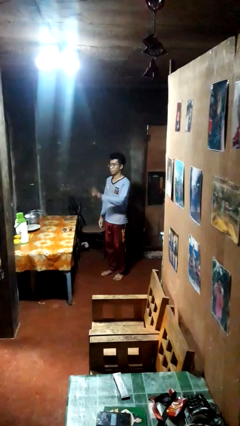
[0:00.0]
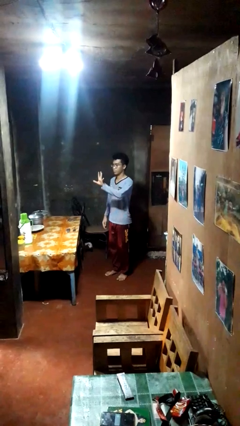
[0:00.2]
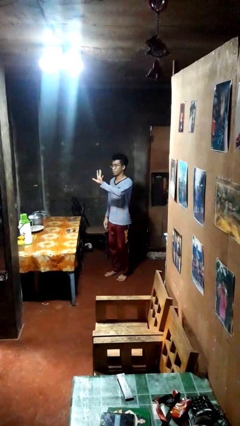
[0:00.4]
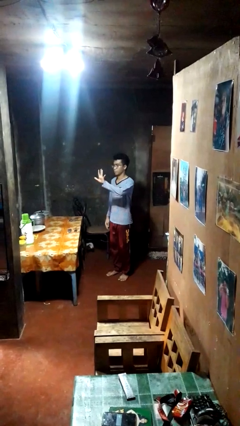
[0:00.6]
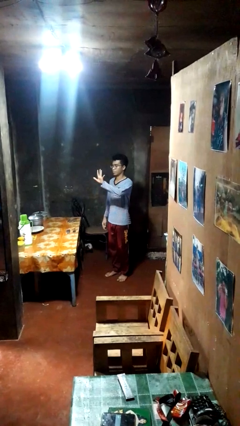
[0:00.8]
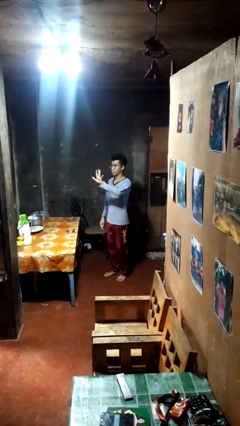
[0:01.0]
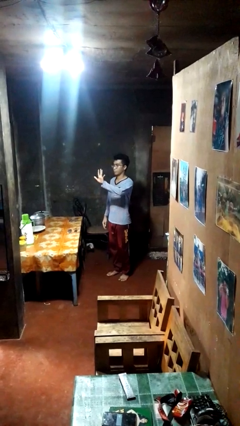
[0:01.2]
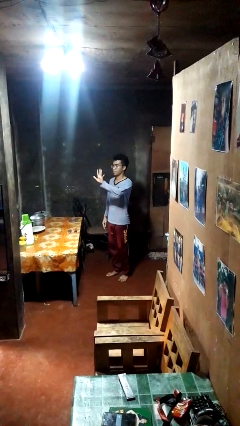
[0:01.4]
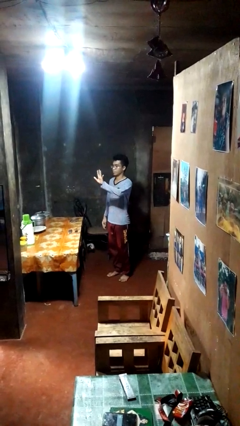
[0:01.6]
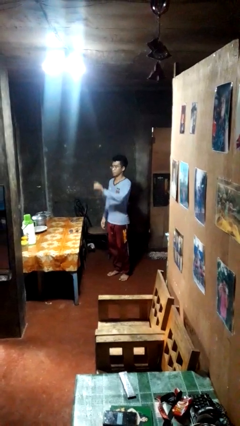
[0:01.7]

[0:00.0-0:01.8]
person gestures number five

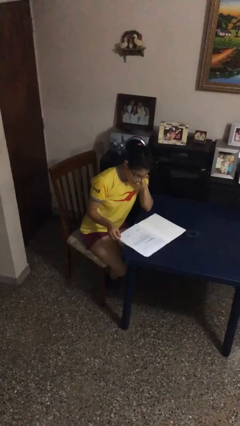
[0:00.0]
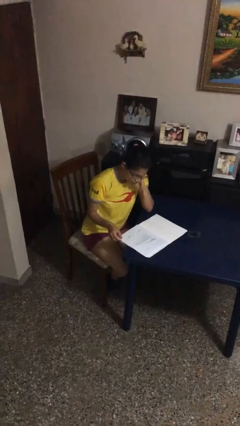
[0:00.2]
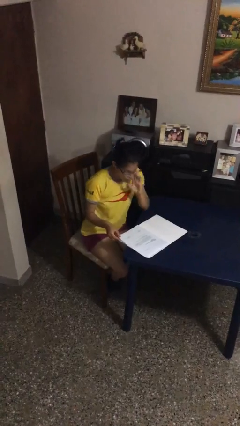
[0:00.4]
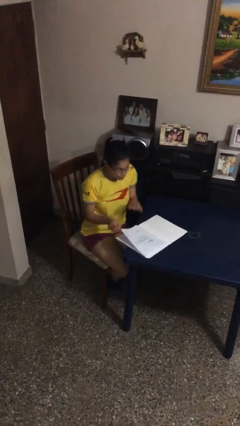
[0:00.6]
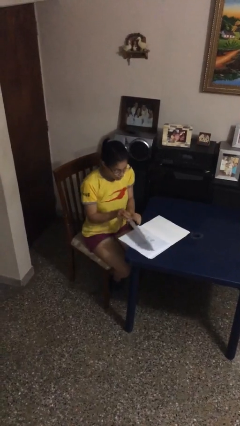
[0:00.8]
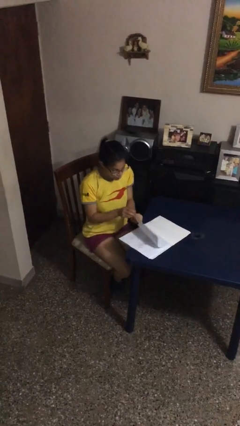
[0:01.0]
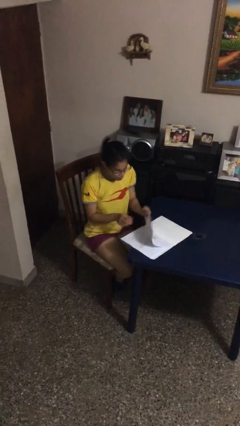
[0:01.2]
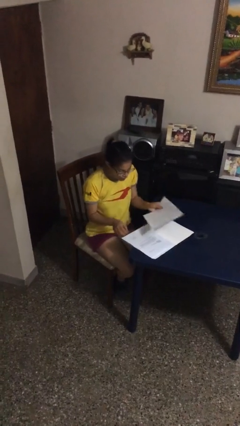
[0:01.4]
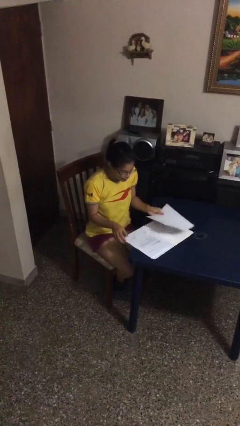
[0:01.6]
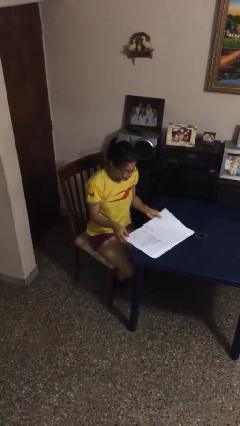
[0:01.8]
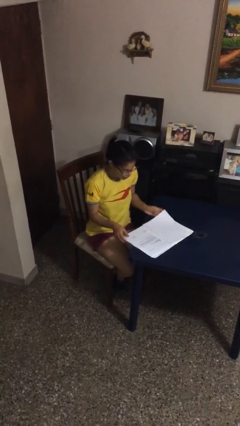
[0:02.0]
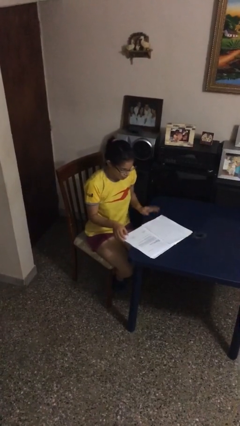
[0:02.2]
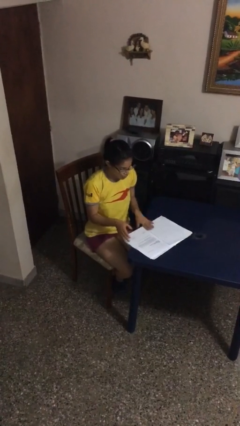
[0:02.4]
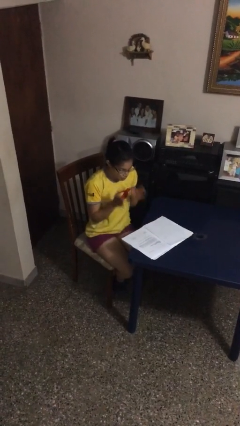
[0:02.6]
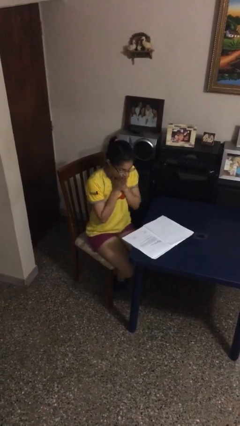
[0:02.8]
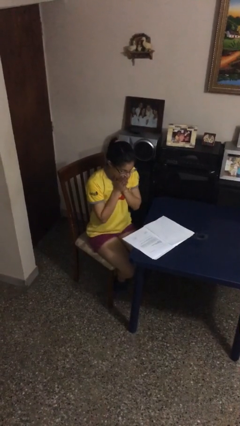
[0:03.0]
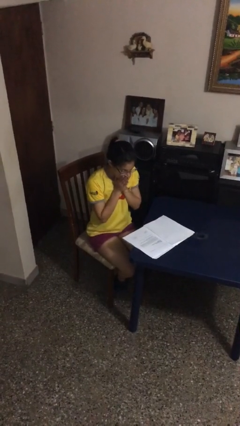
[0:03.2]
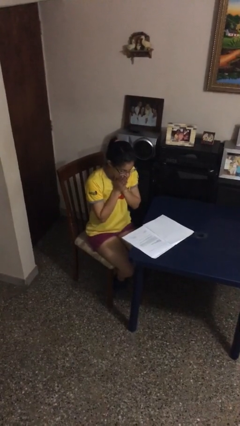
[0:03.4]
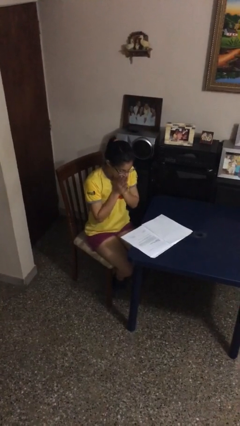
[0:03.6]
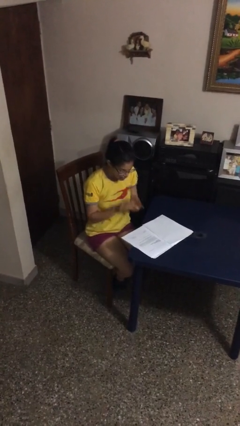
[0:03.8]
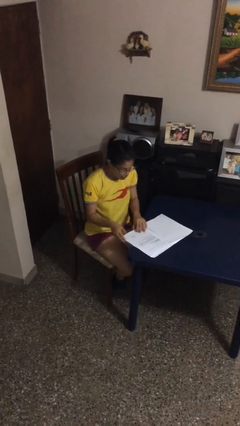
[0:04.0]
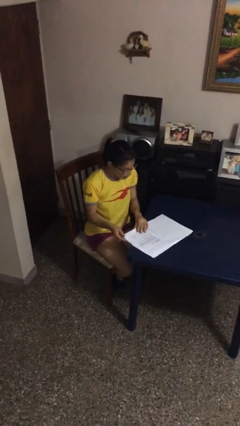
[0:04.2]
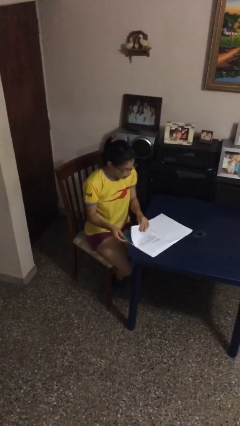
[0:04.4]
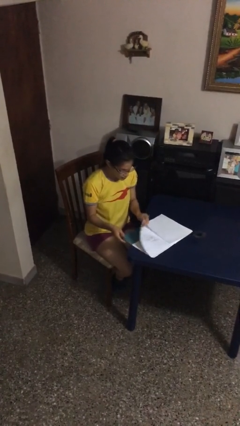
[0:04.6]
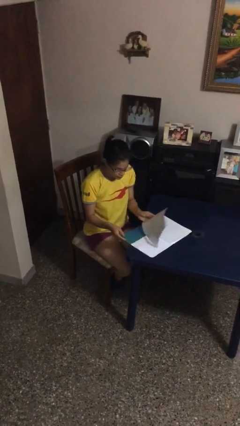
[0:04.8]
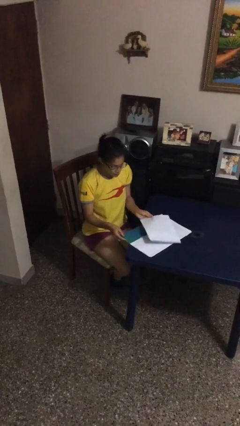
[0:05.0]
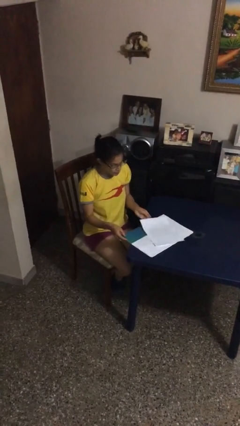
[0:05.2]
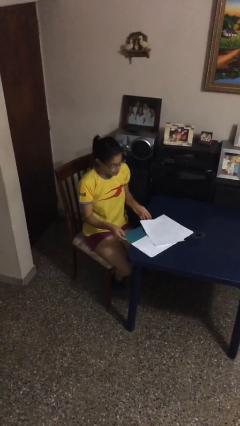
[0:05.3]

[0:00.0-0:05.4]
person reads document

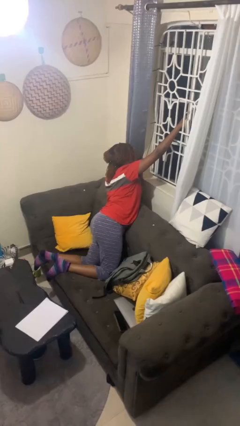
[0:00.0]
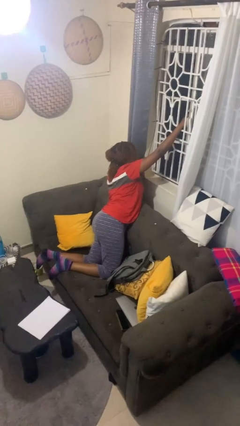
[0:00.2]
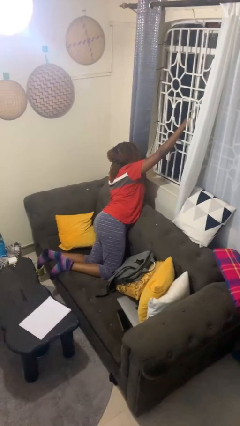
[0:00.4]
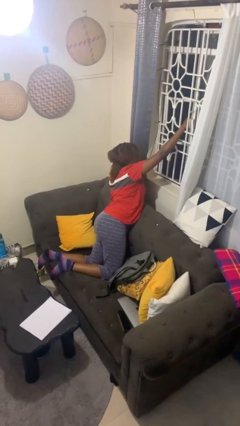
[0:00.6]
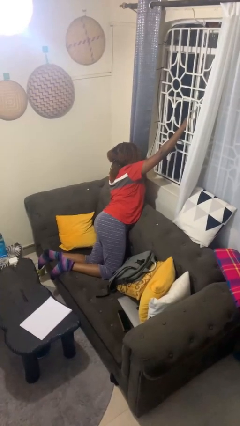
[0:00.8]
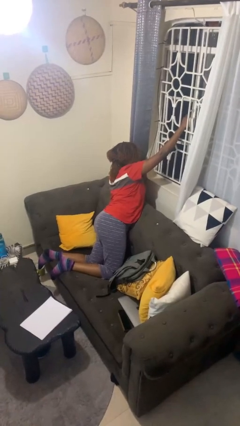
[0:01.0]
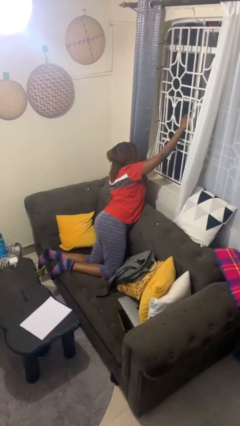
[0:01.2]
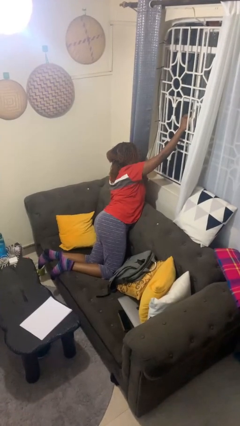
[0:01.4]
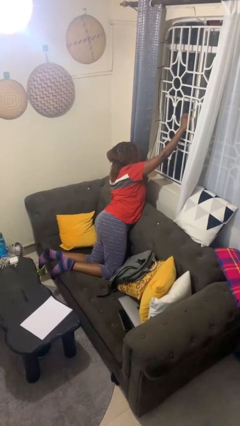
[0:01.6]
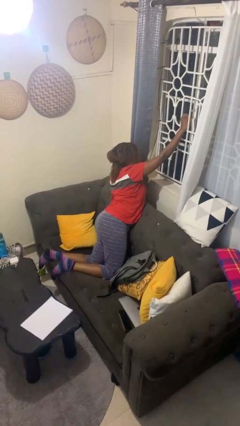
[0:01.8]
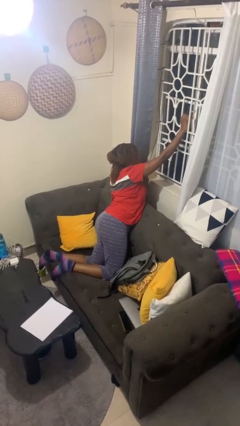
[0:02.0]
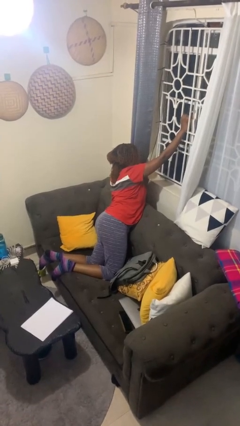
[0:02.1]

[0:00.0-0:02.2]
person closes home window

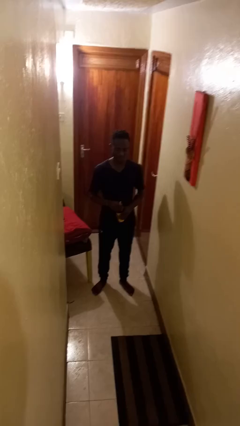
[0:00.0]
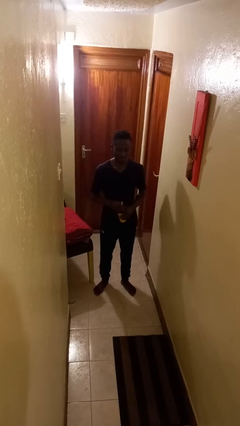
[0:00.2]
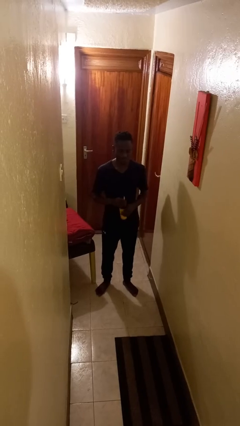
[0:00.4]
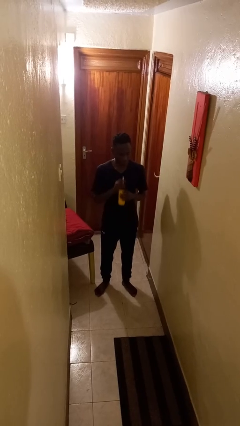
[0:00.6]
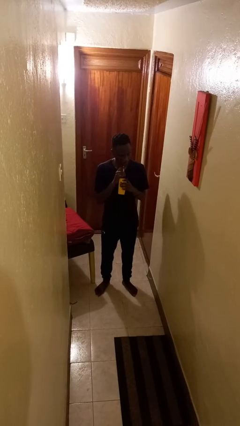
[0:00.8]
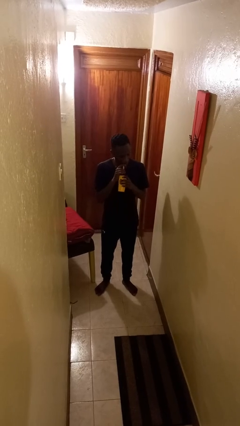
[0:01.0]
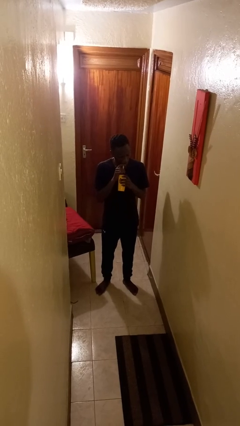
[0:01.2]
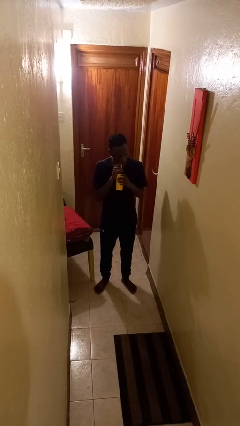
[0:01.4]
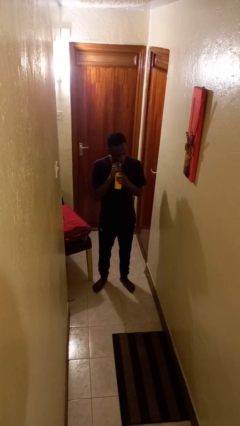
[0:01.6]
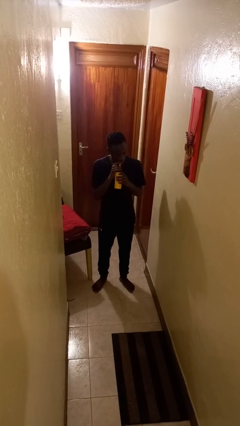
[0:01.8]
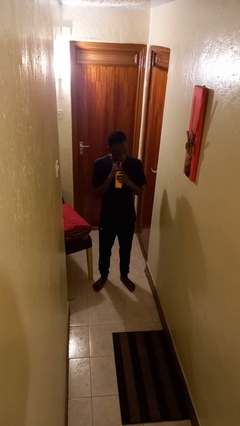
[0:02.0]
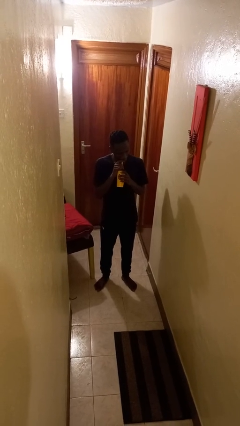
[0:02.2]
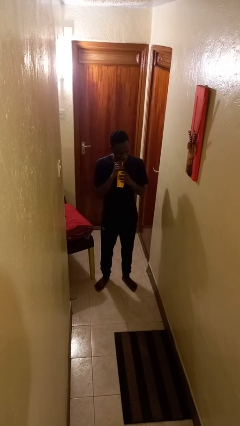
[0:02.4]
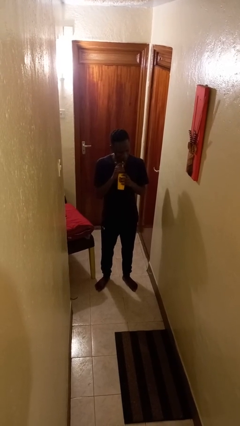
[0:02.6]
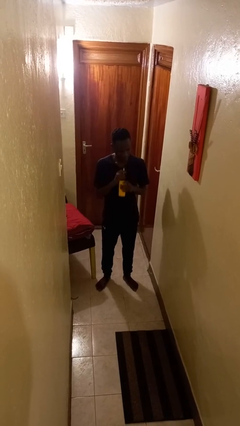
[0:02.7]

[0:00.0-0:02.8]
person drinks from straw

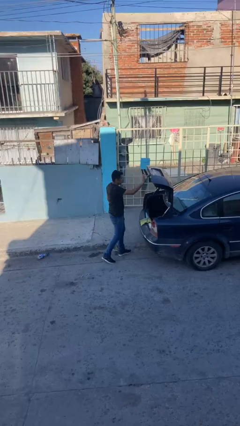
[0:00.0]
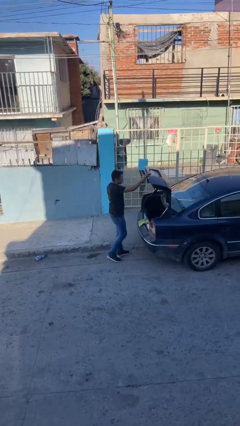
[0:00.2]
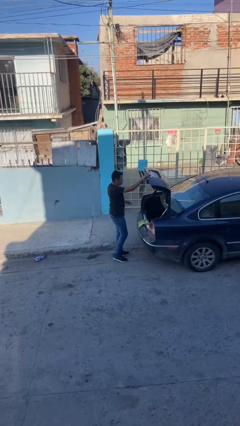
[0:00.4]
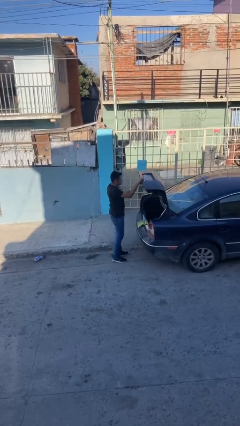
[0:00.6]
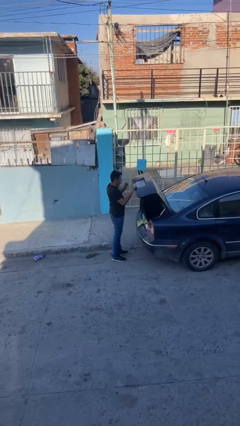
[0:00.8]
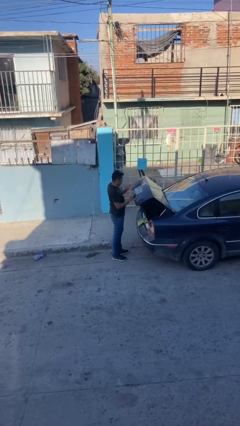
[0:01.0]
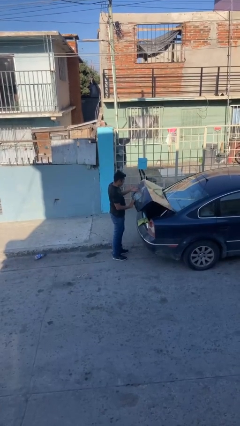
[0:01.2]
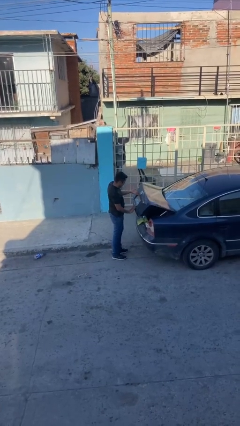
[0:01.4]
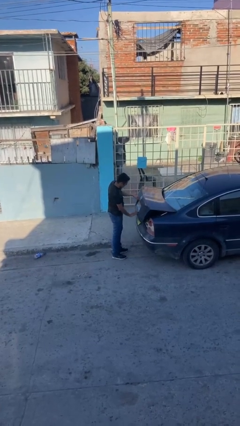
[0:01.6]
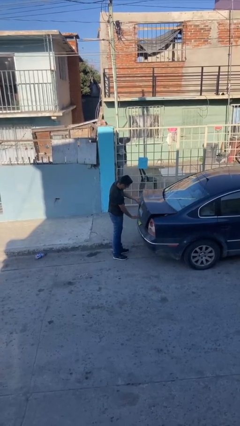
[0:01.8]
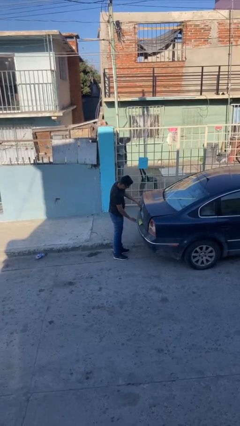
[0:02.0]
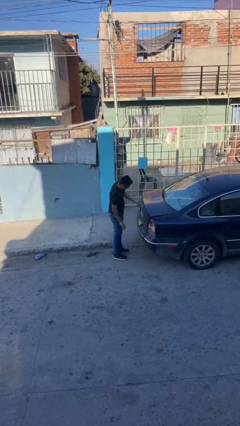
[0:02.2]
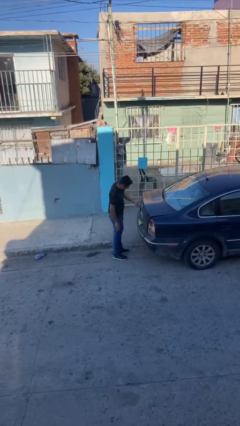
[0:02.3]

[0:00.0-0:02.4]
person closes car trunk

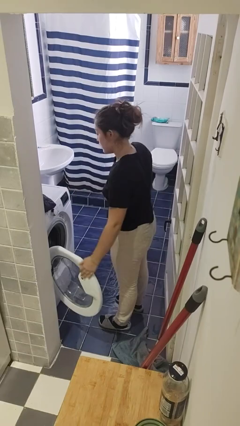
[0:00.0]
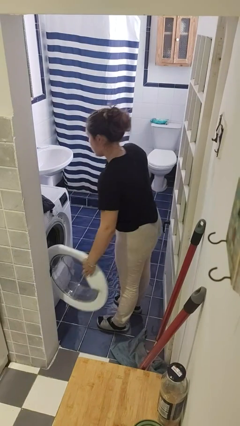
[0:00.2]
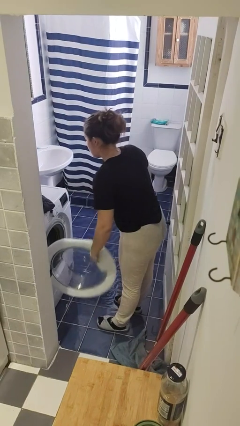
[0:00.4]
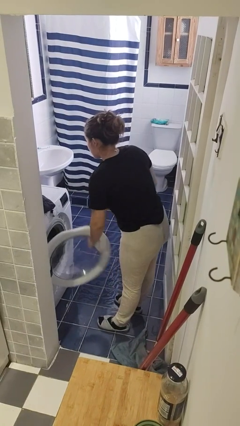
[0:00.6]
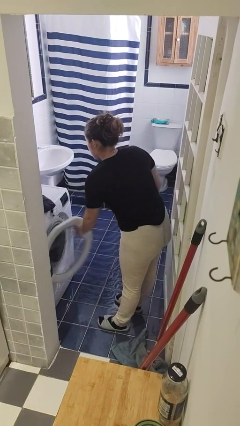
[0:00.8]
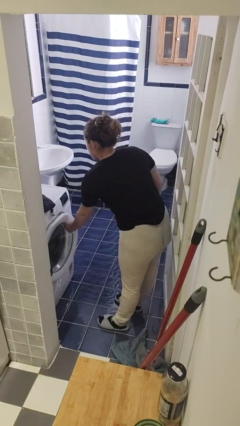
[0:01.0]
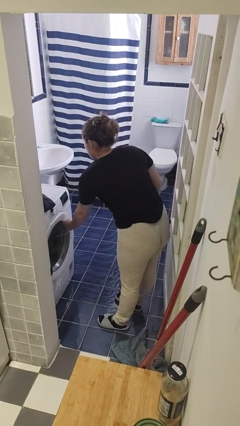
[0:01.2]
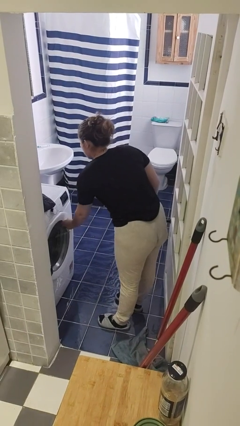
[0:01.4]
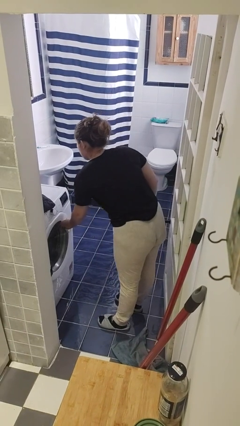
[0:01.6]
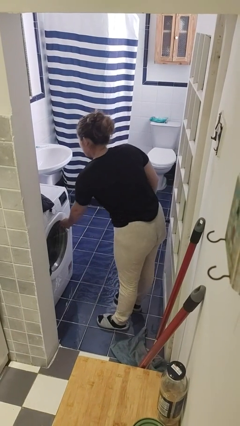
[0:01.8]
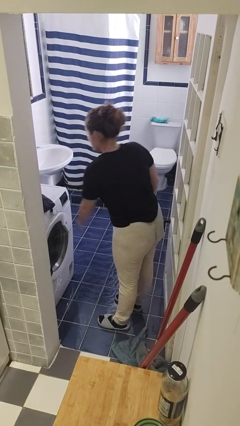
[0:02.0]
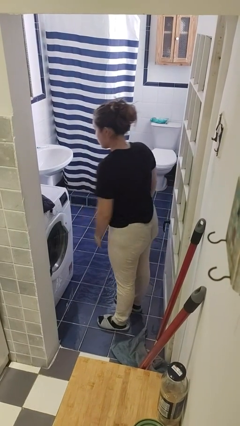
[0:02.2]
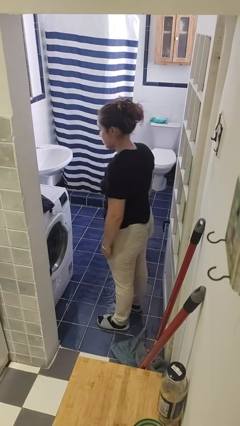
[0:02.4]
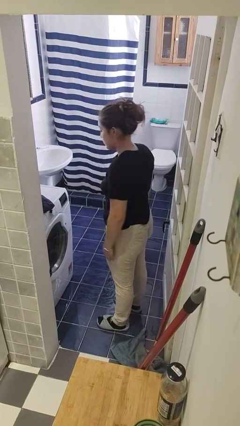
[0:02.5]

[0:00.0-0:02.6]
person closes clothes washer
